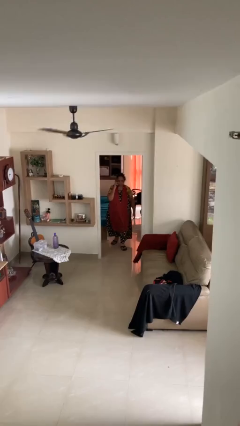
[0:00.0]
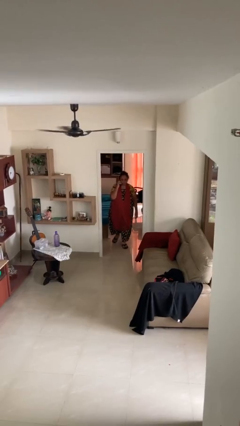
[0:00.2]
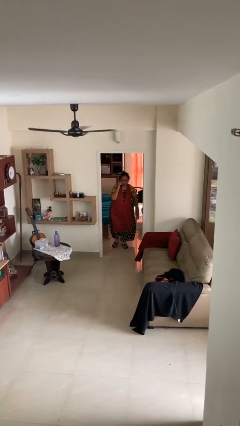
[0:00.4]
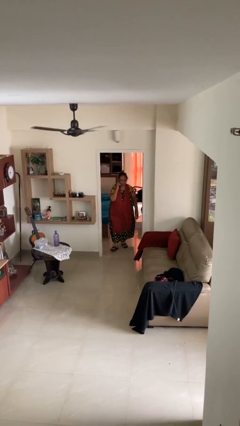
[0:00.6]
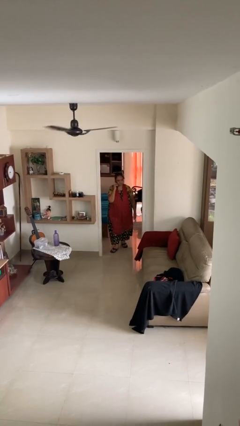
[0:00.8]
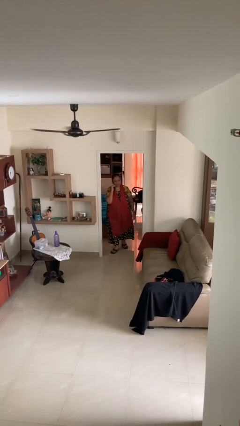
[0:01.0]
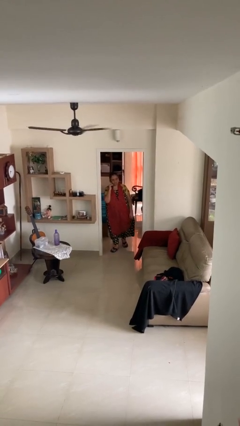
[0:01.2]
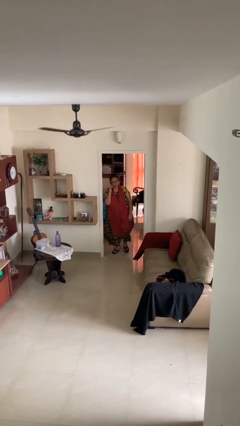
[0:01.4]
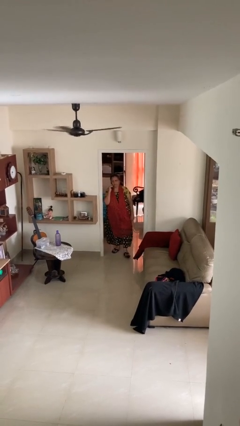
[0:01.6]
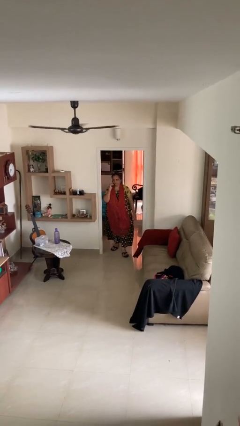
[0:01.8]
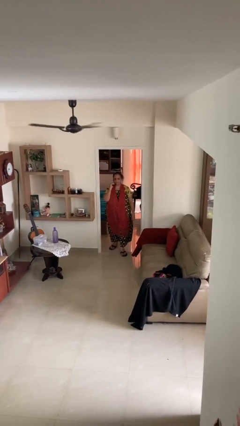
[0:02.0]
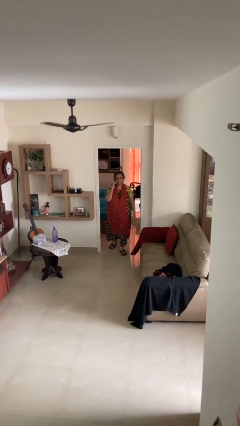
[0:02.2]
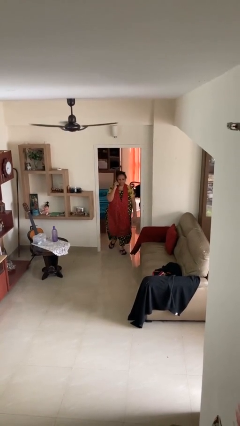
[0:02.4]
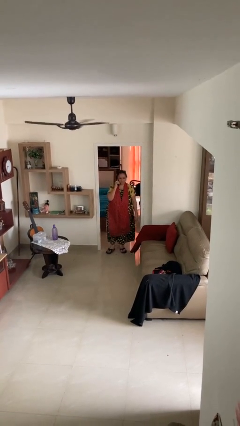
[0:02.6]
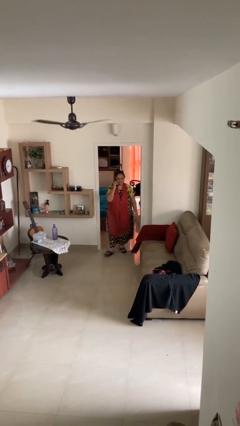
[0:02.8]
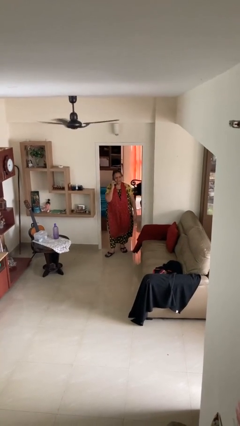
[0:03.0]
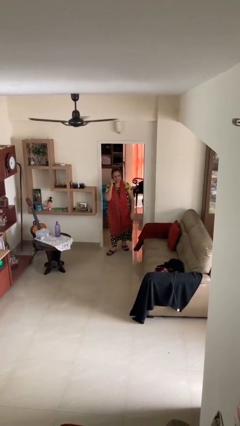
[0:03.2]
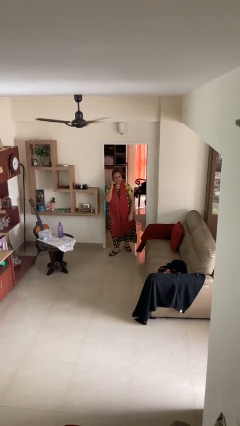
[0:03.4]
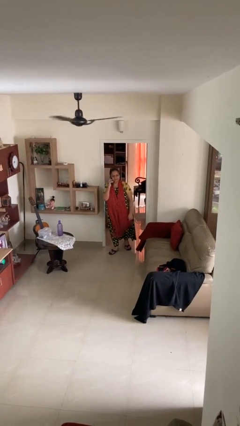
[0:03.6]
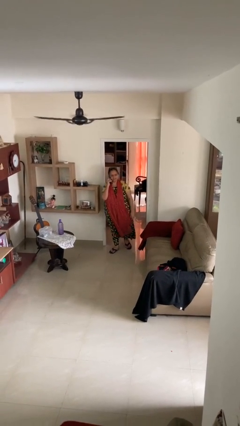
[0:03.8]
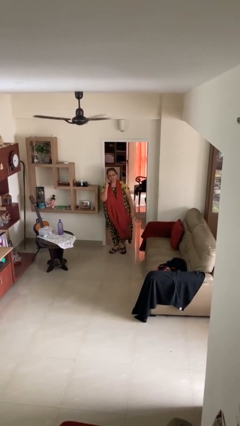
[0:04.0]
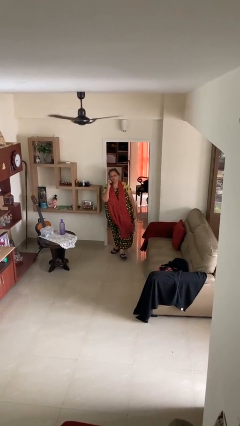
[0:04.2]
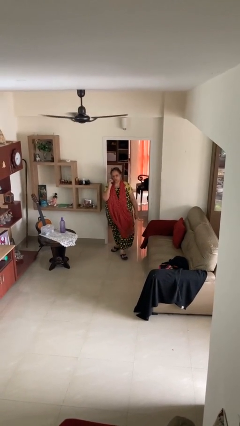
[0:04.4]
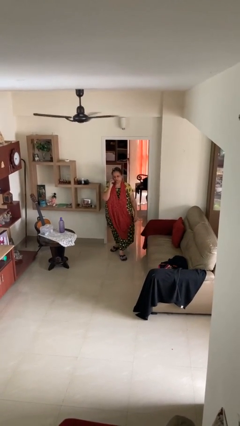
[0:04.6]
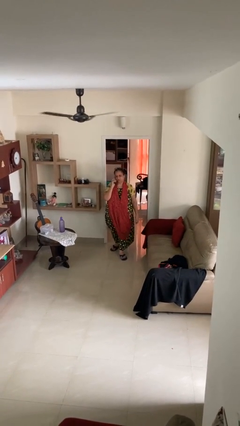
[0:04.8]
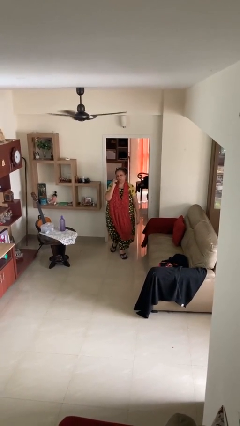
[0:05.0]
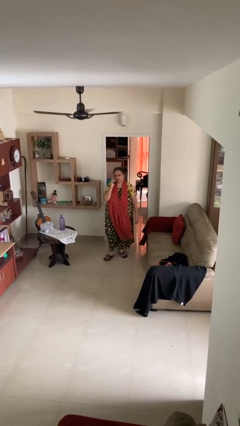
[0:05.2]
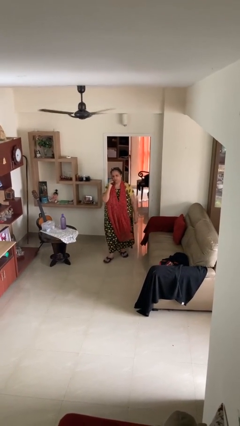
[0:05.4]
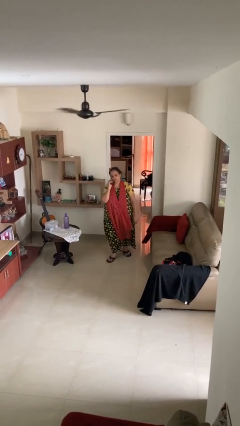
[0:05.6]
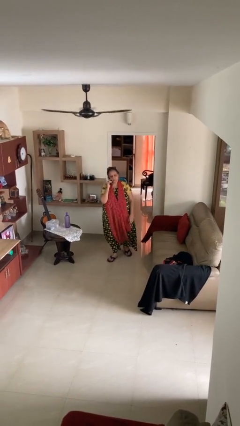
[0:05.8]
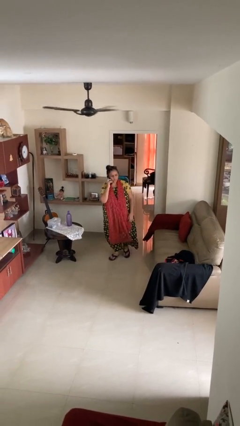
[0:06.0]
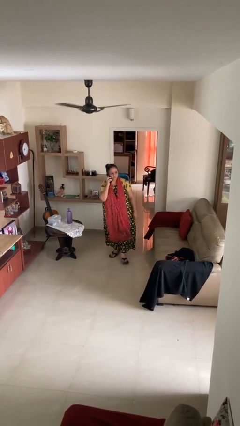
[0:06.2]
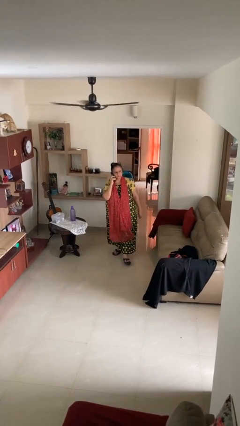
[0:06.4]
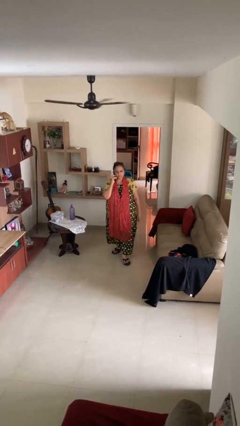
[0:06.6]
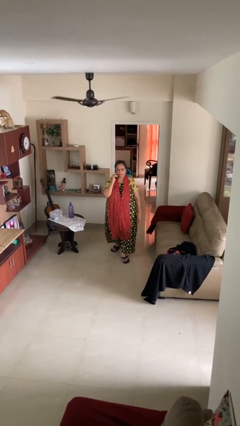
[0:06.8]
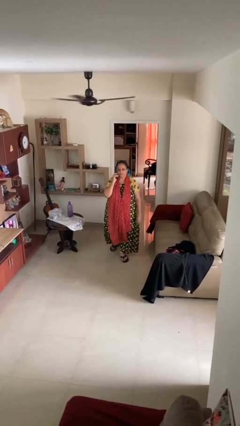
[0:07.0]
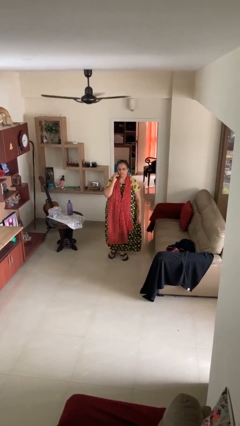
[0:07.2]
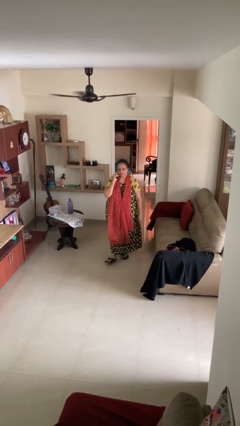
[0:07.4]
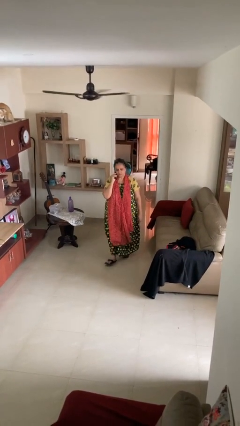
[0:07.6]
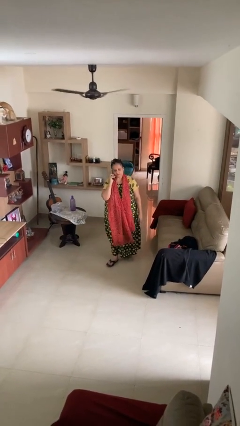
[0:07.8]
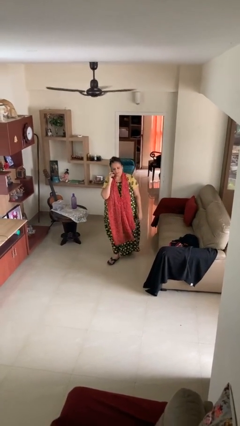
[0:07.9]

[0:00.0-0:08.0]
person enters scene through structure

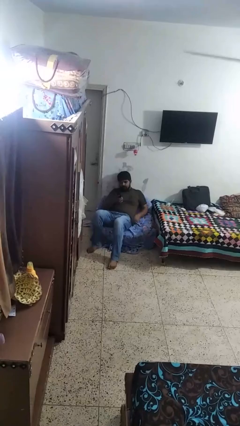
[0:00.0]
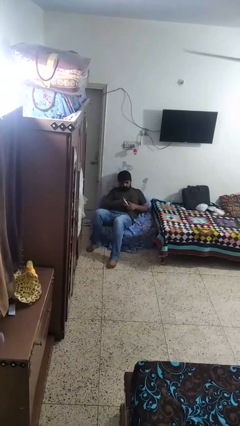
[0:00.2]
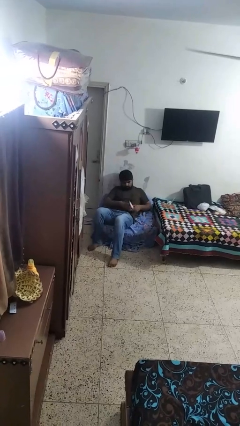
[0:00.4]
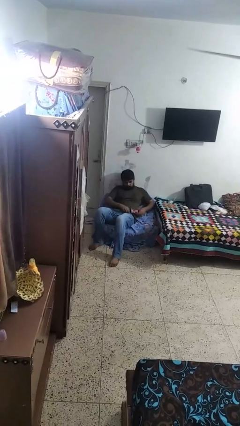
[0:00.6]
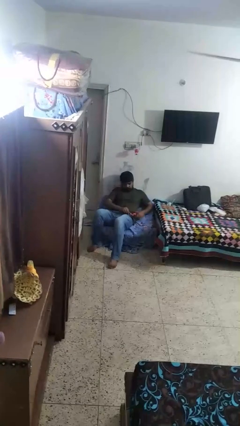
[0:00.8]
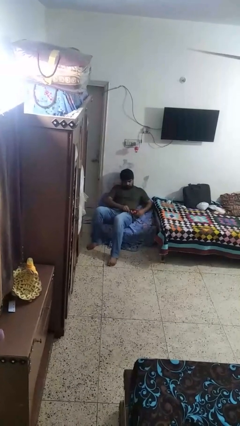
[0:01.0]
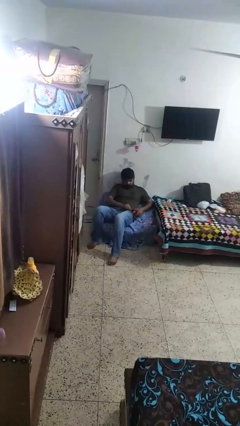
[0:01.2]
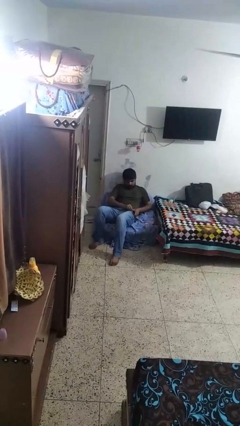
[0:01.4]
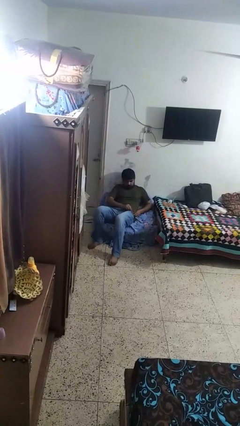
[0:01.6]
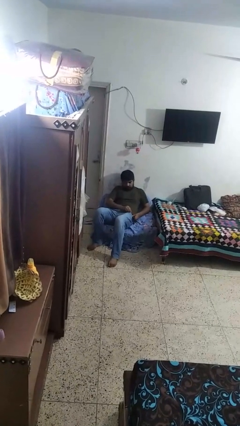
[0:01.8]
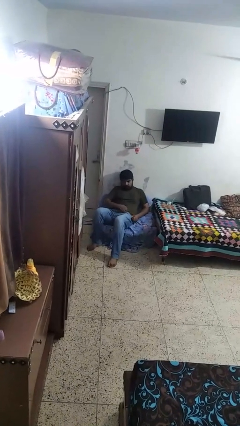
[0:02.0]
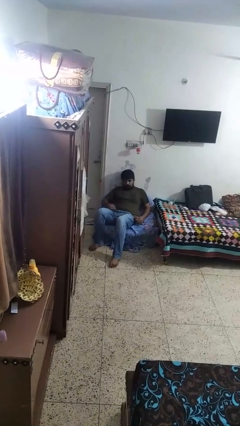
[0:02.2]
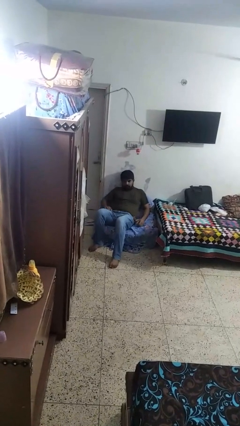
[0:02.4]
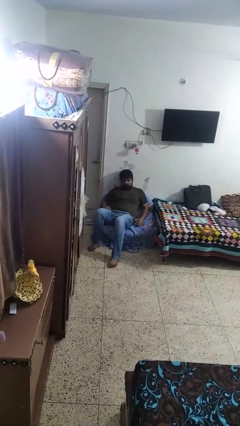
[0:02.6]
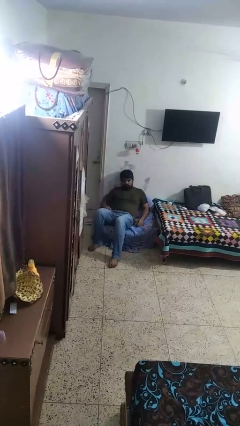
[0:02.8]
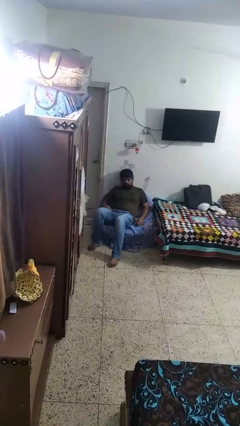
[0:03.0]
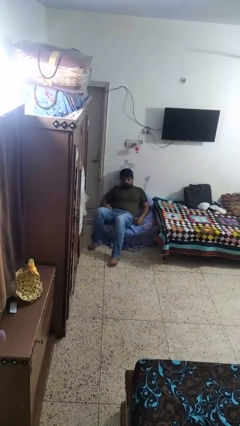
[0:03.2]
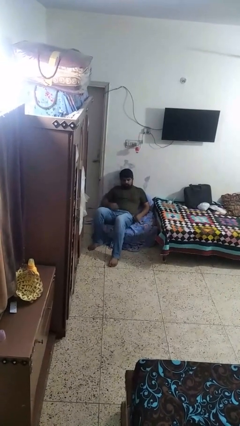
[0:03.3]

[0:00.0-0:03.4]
person puts phone into pocket

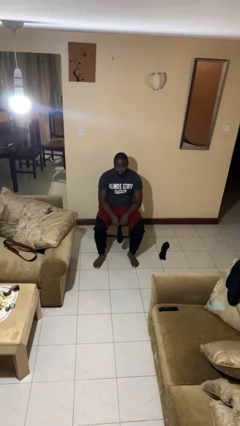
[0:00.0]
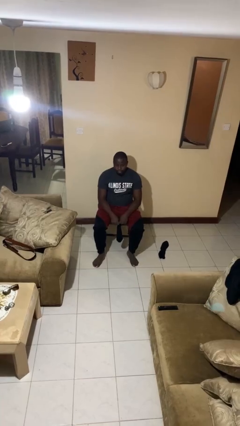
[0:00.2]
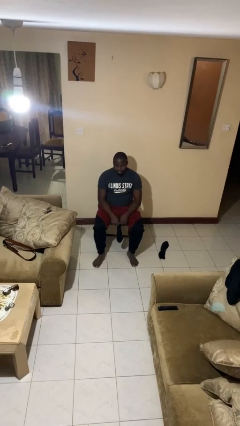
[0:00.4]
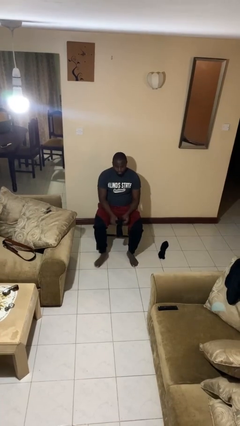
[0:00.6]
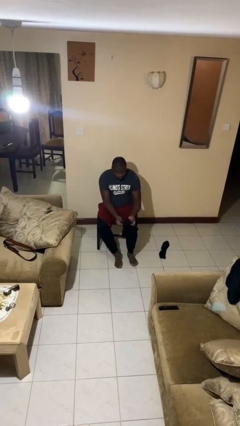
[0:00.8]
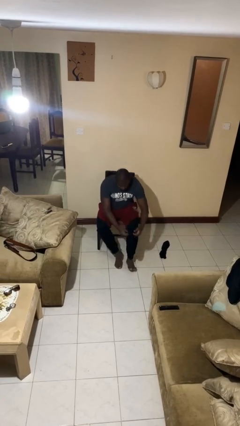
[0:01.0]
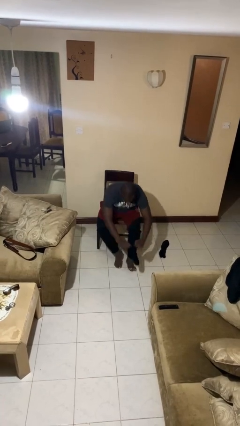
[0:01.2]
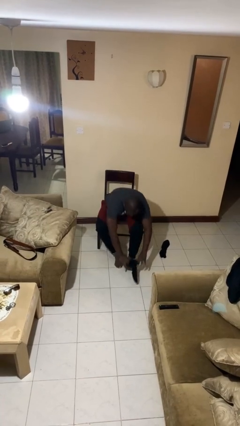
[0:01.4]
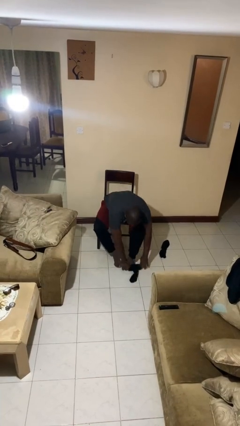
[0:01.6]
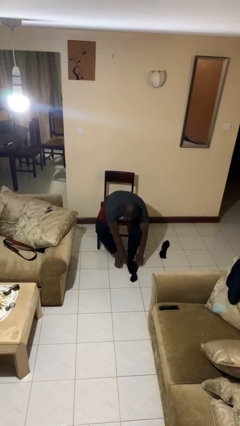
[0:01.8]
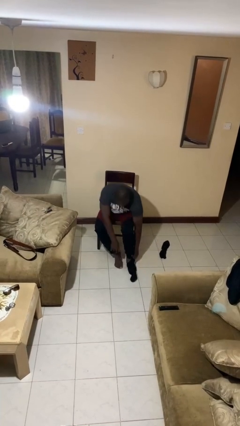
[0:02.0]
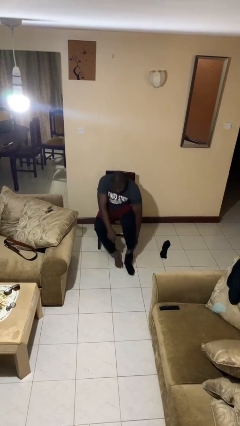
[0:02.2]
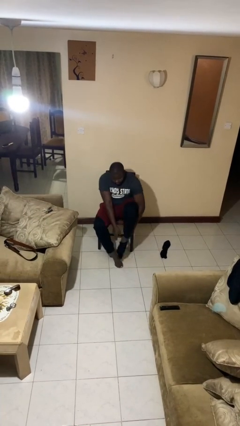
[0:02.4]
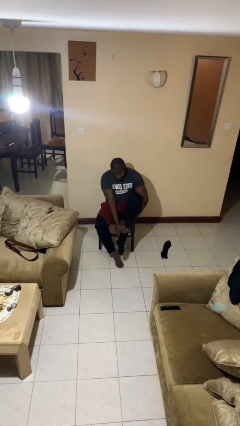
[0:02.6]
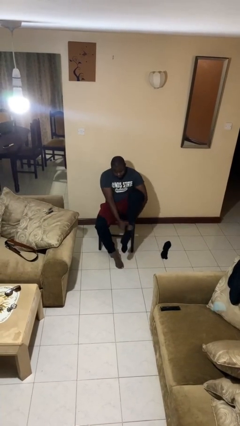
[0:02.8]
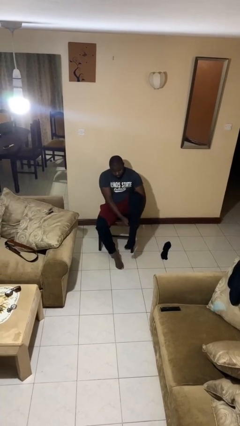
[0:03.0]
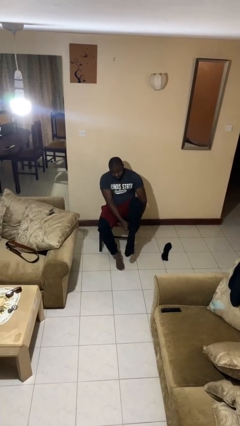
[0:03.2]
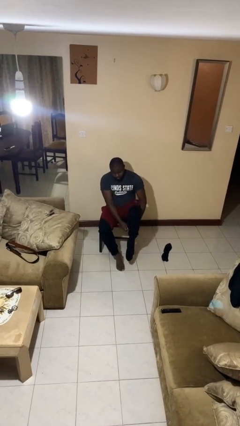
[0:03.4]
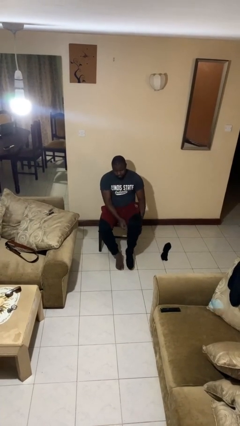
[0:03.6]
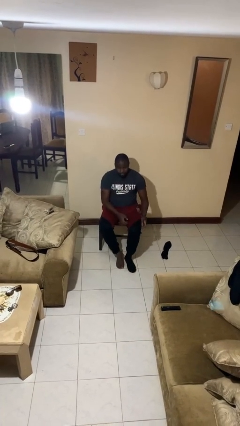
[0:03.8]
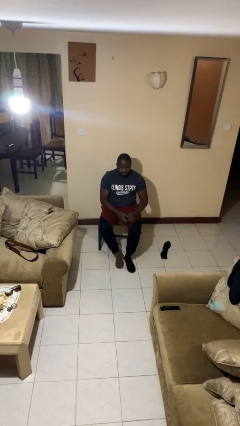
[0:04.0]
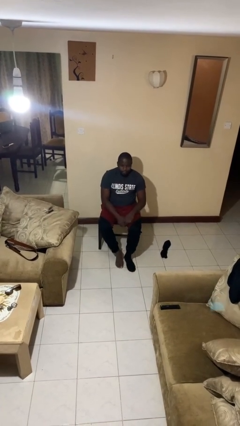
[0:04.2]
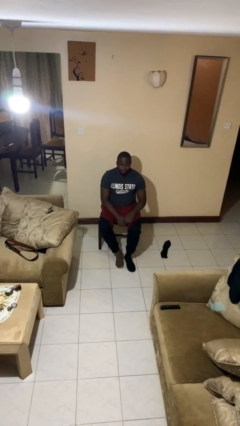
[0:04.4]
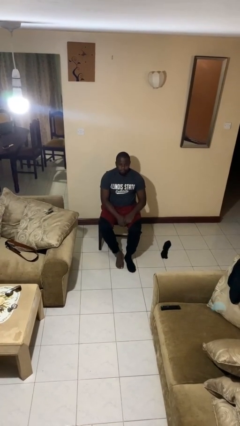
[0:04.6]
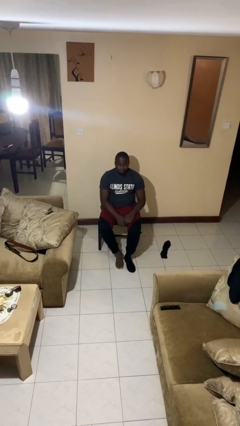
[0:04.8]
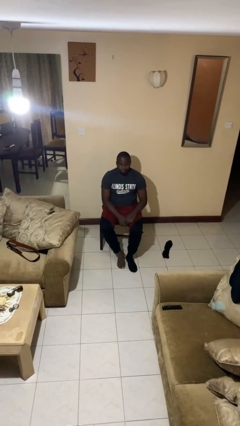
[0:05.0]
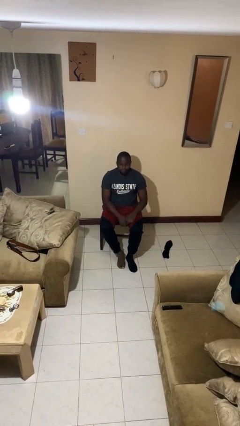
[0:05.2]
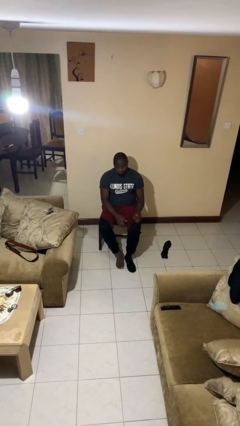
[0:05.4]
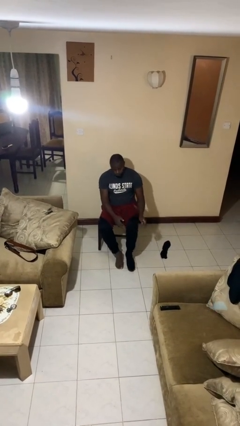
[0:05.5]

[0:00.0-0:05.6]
person puts on socks

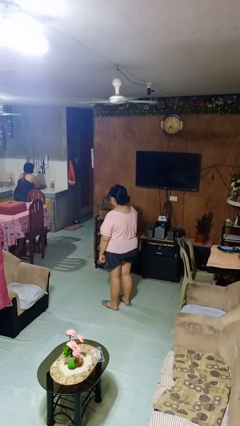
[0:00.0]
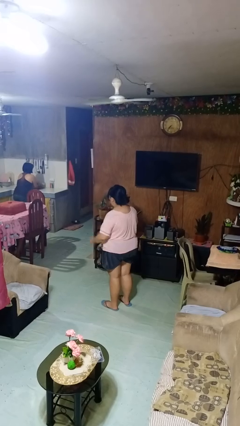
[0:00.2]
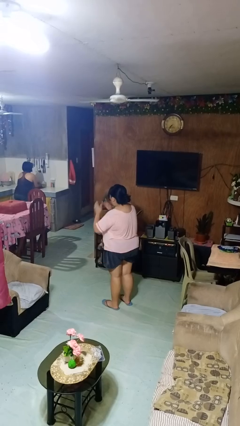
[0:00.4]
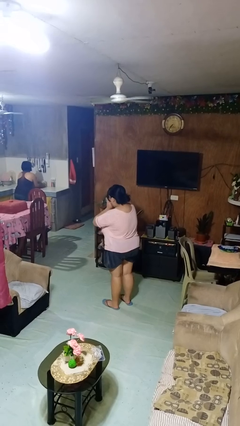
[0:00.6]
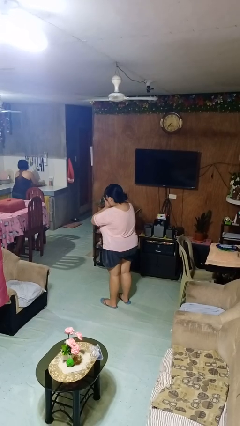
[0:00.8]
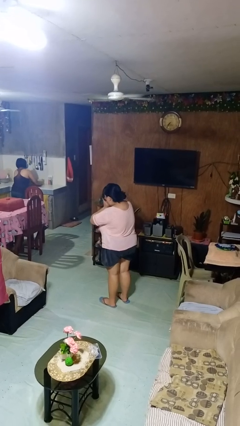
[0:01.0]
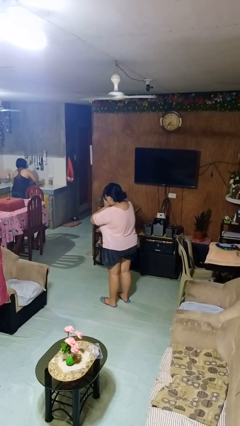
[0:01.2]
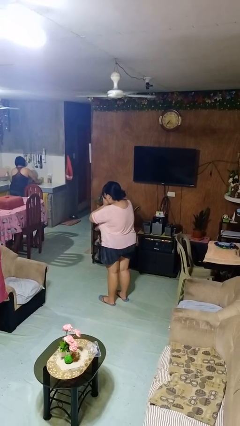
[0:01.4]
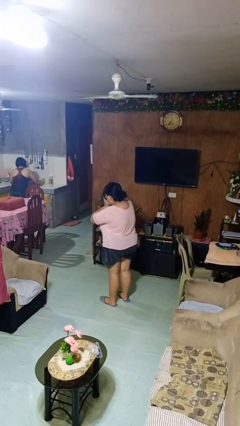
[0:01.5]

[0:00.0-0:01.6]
person blows into hands
